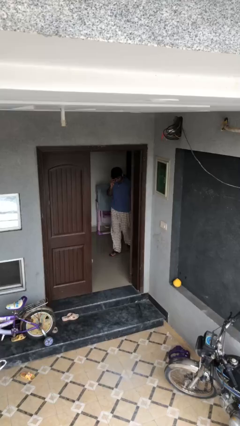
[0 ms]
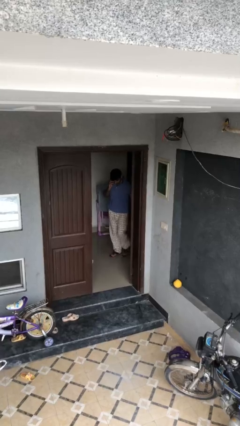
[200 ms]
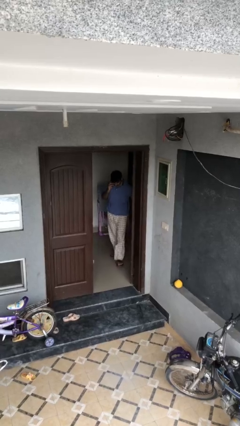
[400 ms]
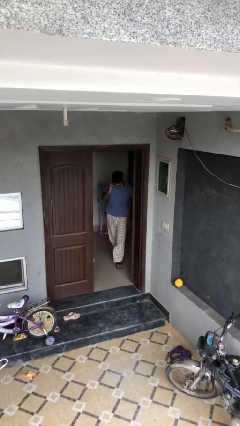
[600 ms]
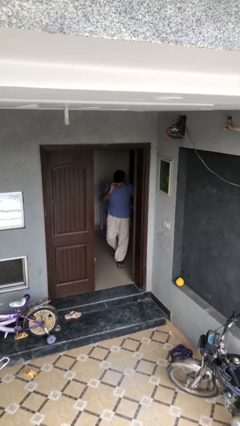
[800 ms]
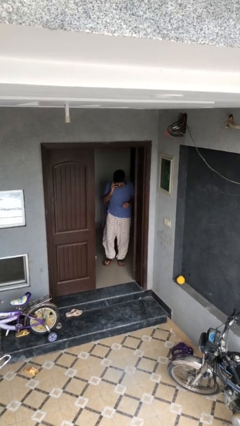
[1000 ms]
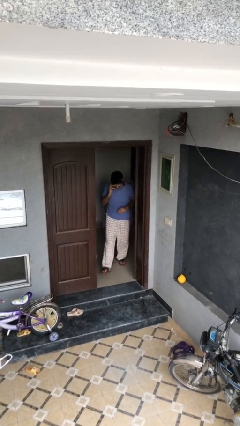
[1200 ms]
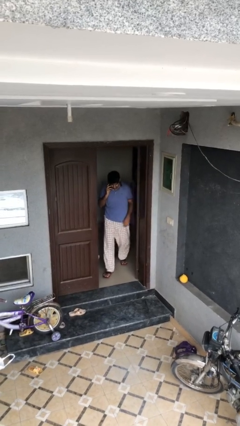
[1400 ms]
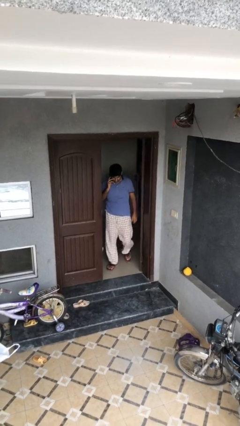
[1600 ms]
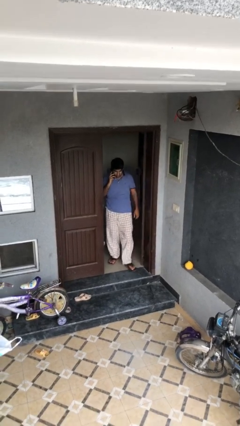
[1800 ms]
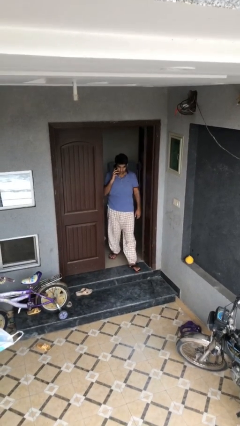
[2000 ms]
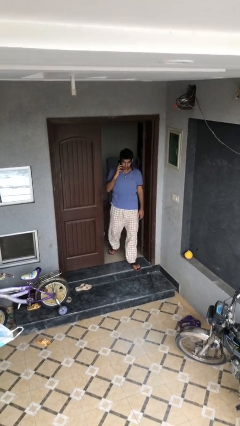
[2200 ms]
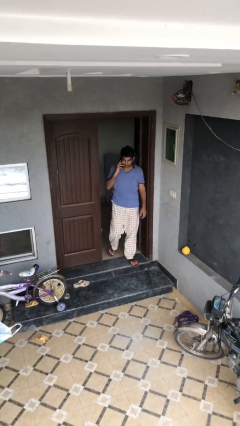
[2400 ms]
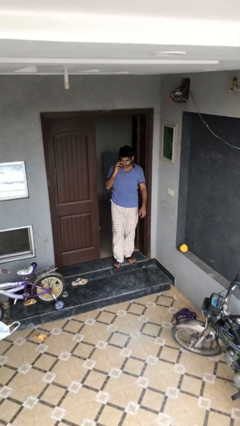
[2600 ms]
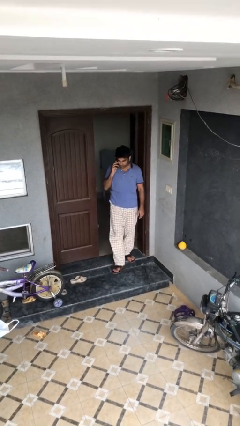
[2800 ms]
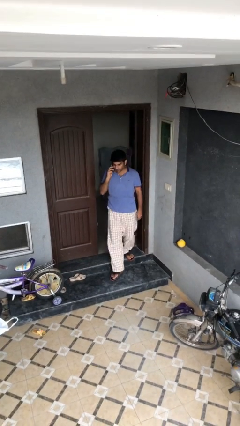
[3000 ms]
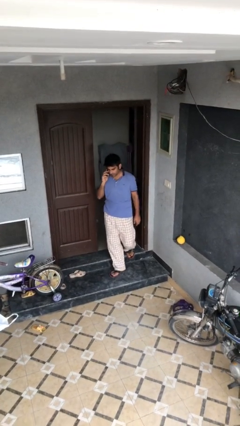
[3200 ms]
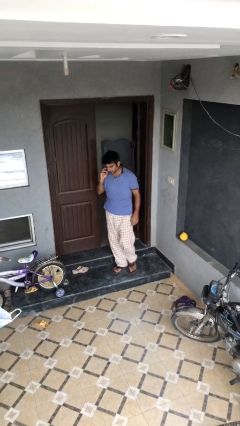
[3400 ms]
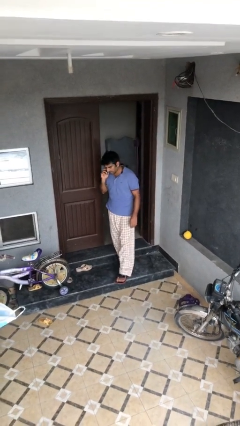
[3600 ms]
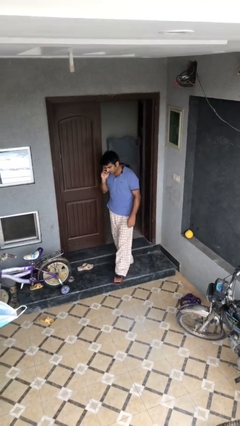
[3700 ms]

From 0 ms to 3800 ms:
person enters scene through structure

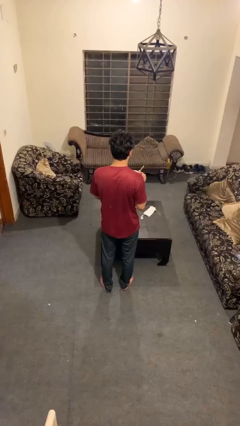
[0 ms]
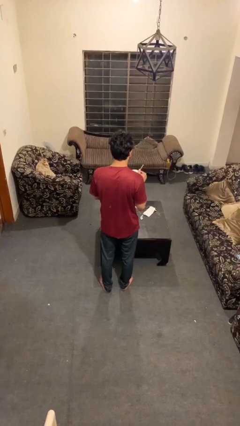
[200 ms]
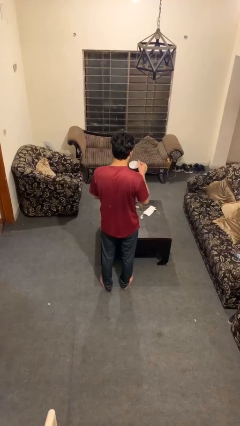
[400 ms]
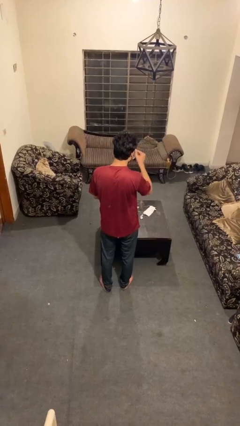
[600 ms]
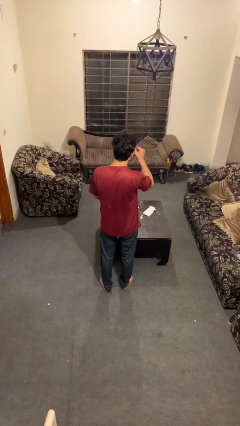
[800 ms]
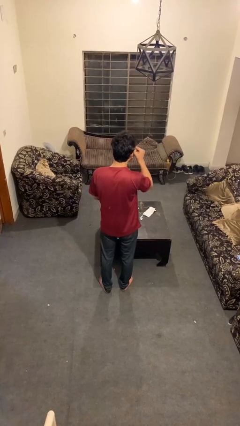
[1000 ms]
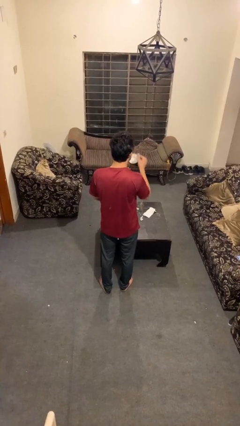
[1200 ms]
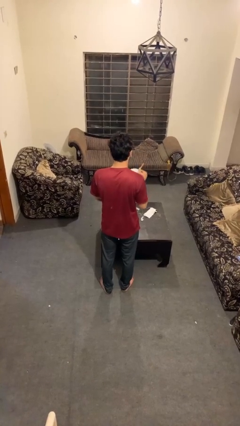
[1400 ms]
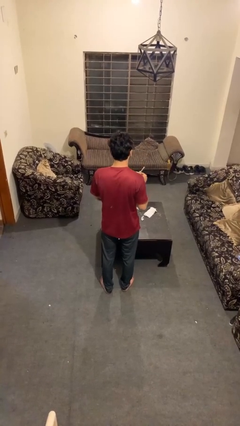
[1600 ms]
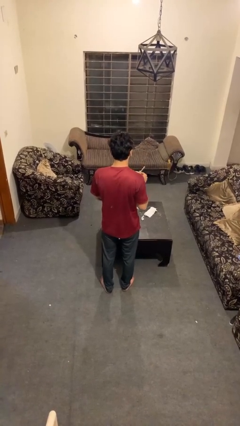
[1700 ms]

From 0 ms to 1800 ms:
person drinks from mug

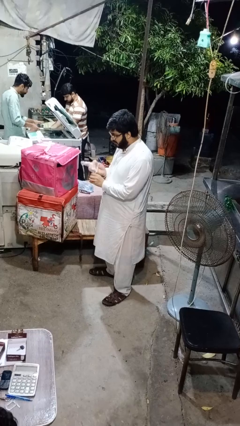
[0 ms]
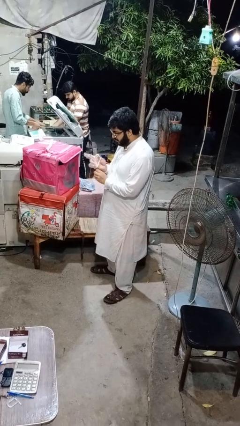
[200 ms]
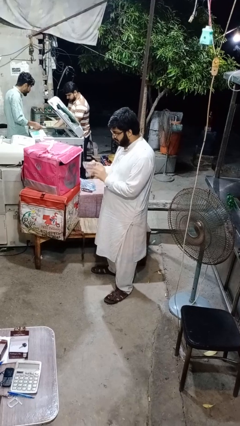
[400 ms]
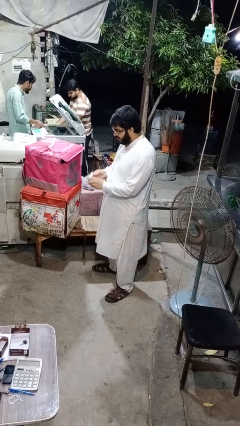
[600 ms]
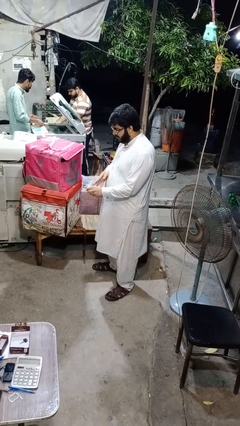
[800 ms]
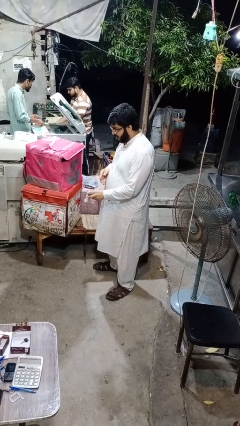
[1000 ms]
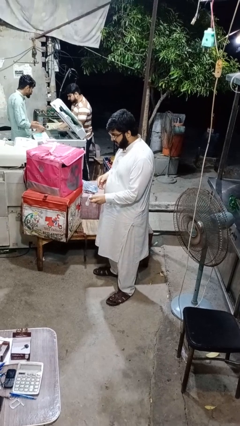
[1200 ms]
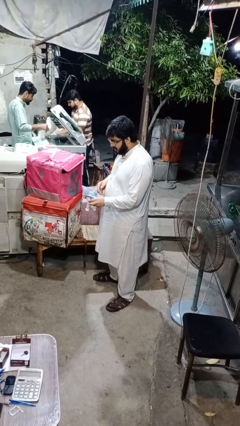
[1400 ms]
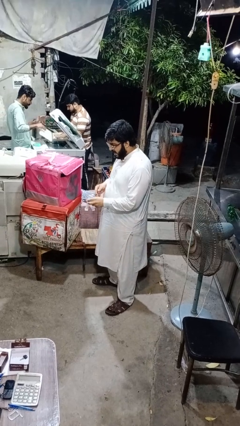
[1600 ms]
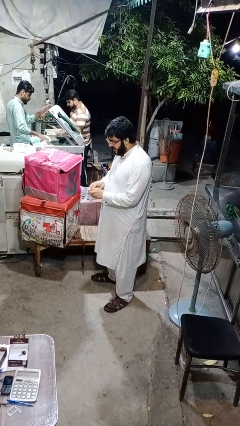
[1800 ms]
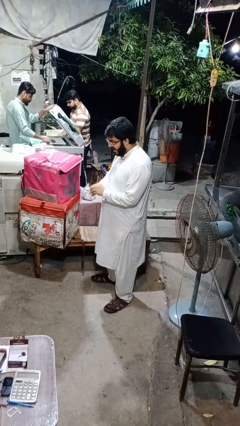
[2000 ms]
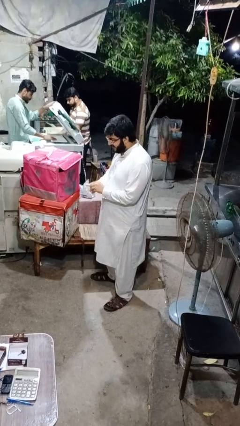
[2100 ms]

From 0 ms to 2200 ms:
person takes off gloves

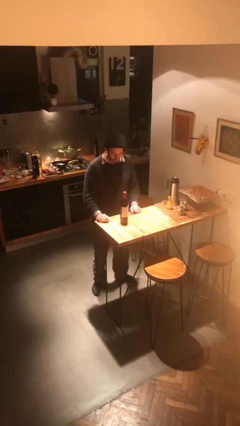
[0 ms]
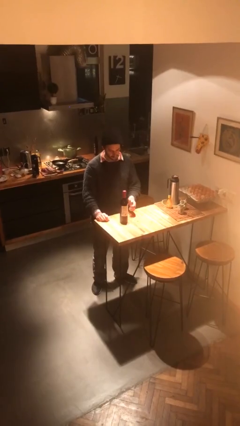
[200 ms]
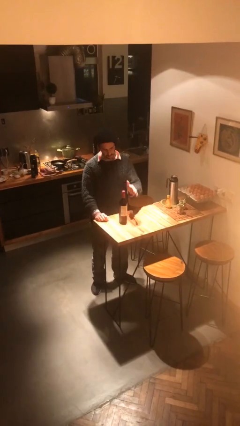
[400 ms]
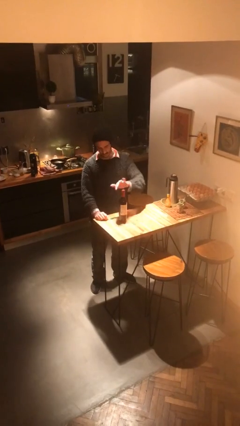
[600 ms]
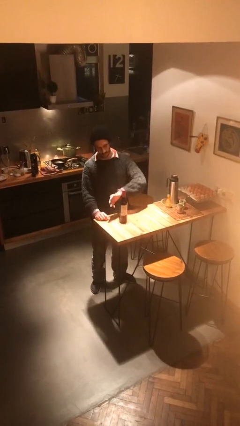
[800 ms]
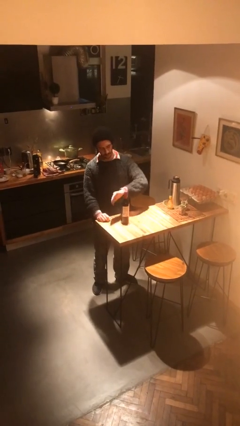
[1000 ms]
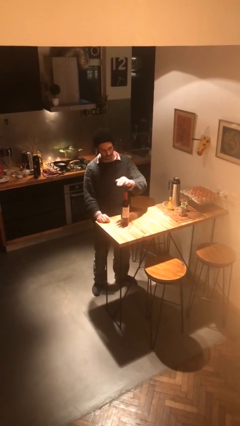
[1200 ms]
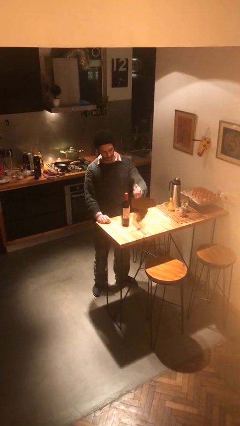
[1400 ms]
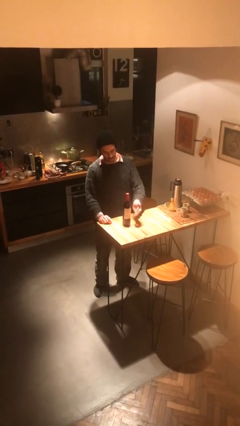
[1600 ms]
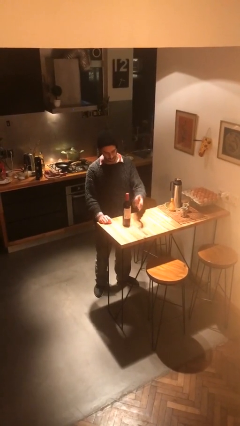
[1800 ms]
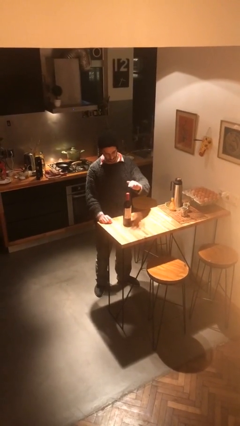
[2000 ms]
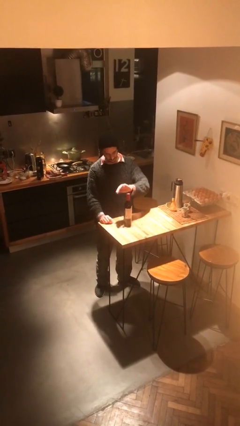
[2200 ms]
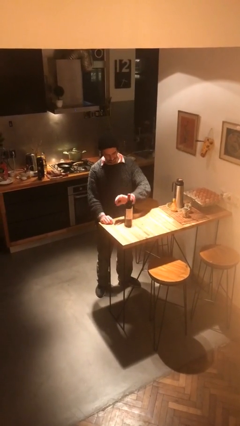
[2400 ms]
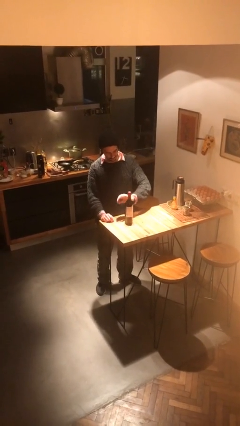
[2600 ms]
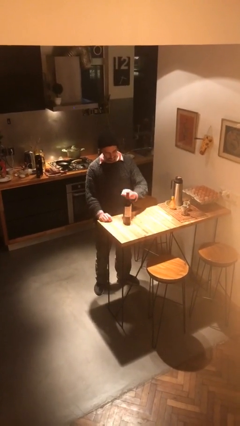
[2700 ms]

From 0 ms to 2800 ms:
person waves hand over object

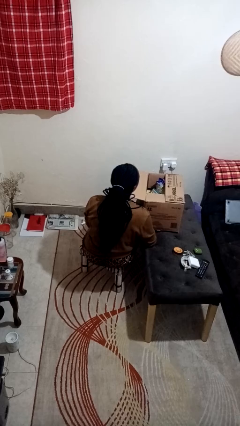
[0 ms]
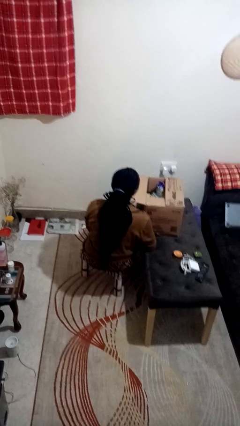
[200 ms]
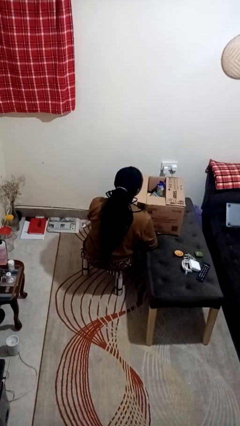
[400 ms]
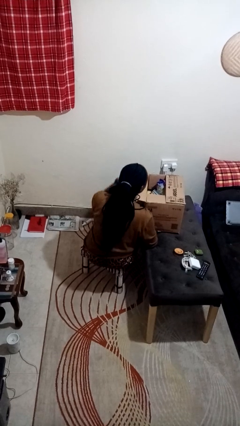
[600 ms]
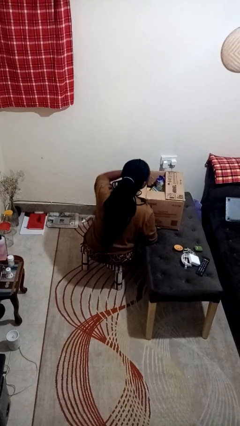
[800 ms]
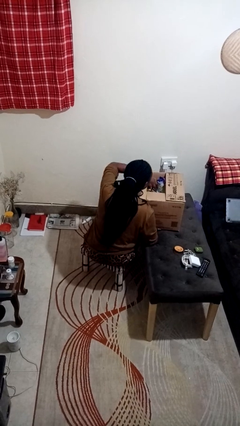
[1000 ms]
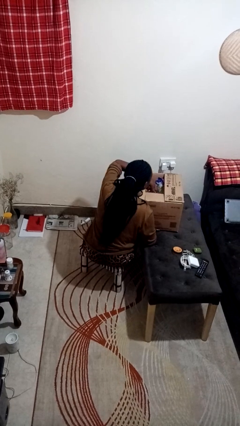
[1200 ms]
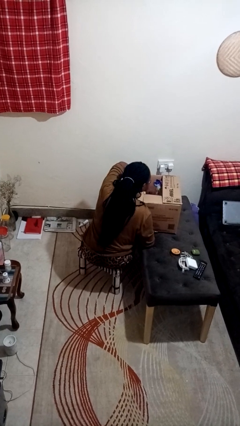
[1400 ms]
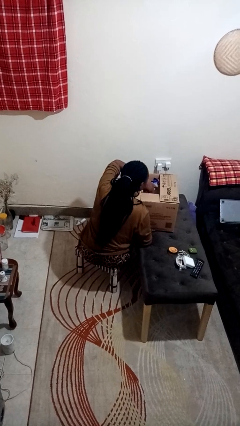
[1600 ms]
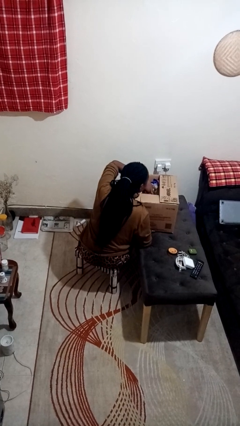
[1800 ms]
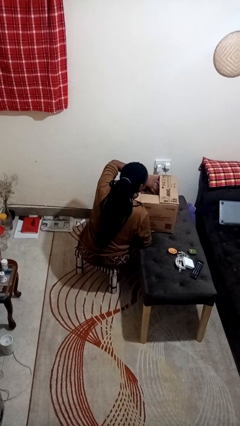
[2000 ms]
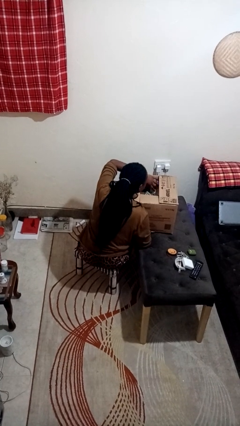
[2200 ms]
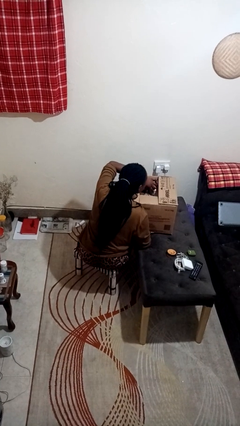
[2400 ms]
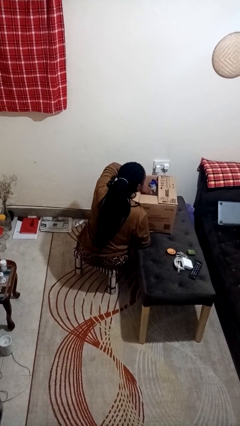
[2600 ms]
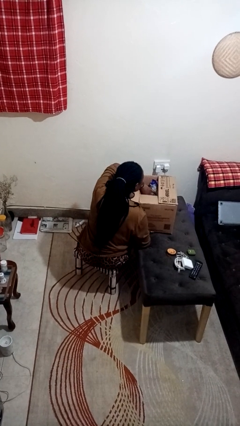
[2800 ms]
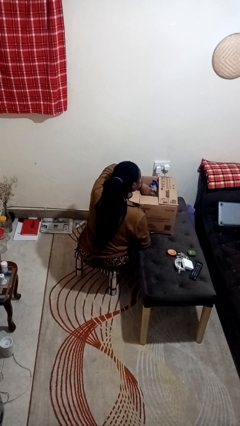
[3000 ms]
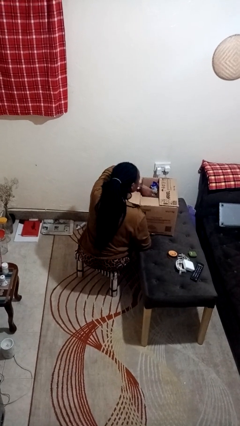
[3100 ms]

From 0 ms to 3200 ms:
person searches in box

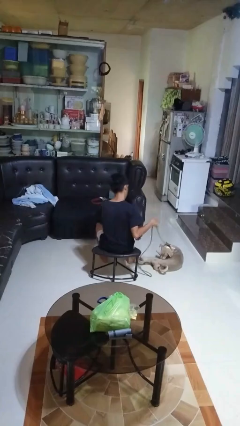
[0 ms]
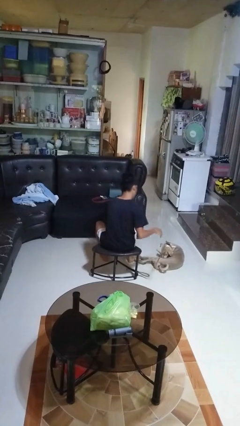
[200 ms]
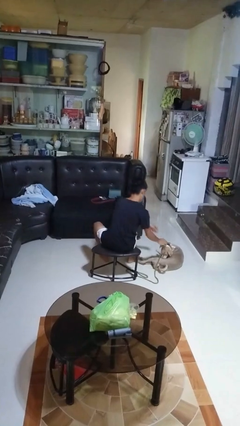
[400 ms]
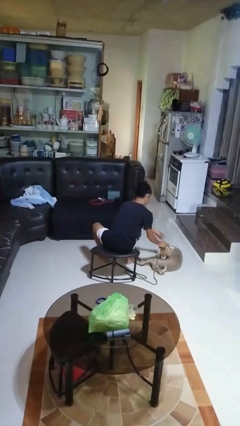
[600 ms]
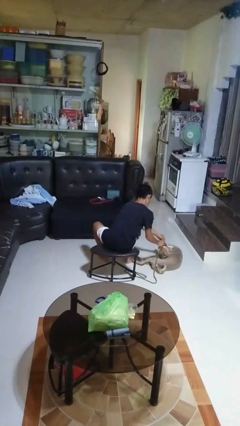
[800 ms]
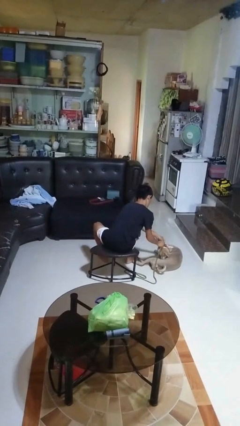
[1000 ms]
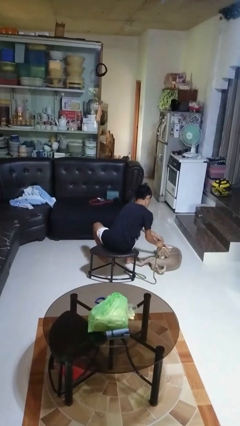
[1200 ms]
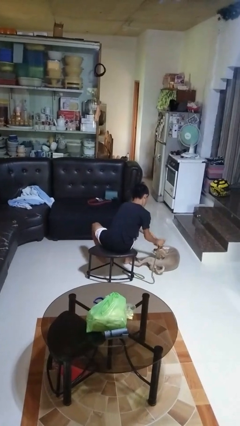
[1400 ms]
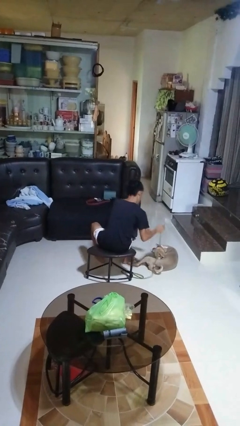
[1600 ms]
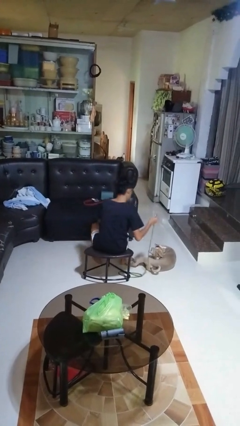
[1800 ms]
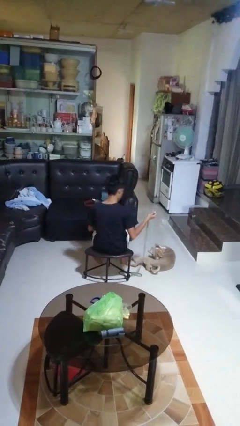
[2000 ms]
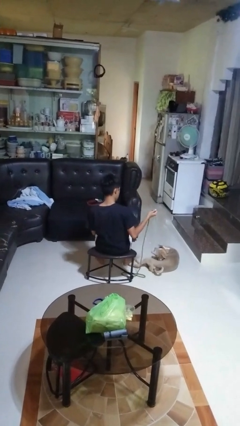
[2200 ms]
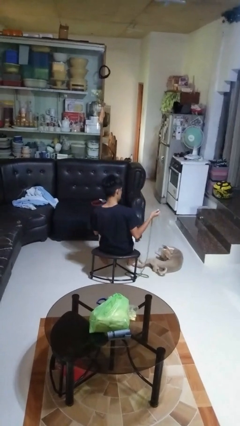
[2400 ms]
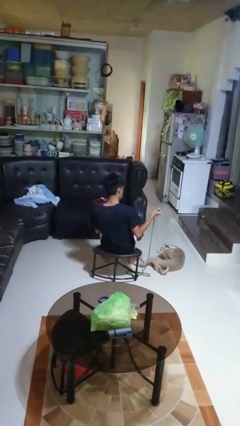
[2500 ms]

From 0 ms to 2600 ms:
person unattaches leash from dog

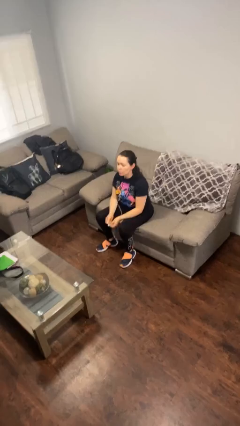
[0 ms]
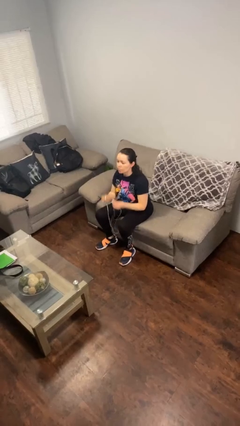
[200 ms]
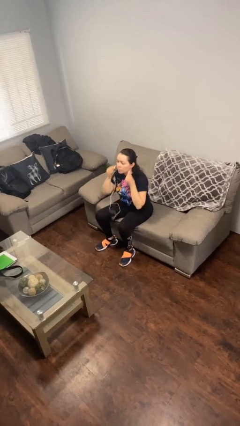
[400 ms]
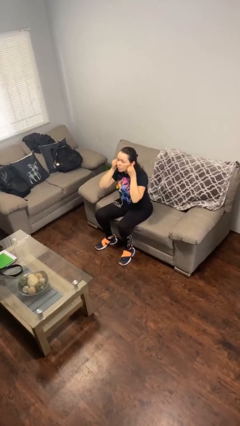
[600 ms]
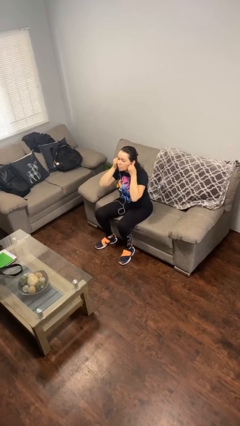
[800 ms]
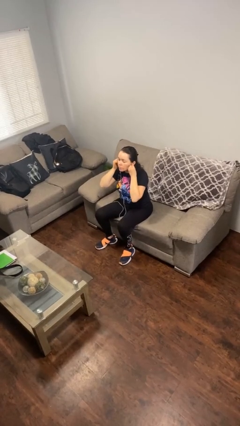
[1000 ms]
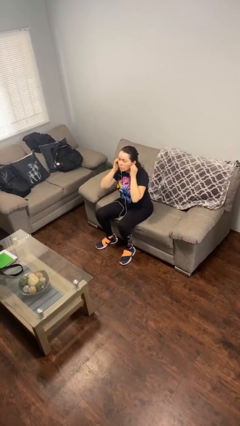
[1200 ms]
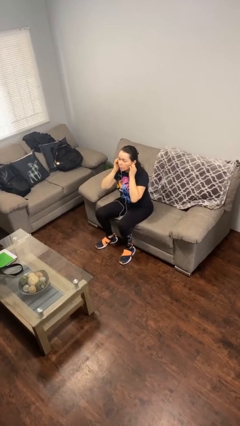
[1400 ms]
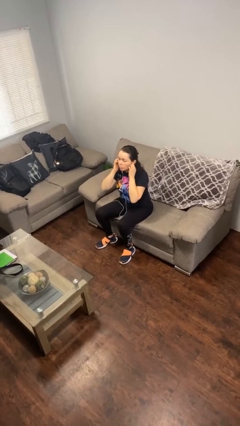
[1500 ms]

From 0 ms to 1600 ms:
person puts on headphones
